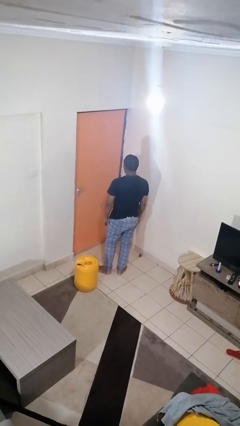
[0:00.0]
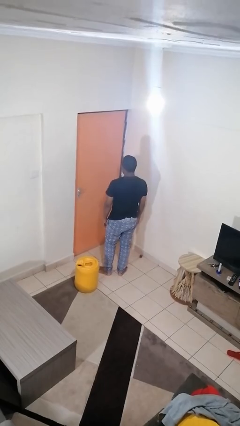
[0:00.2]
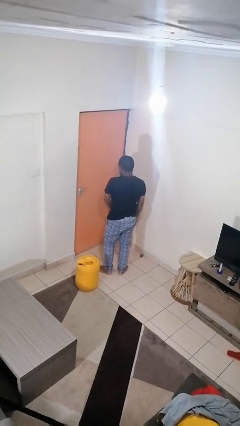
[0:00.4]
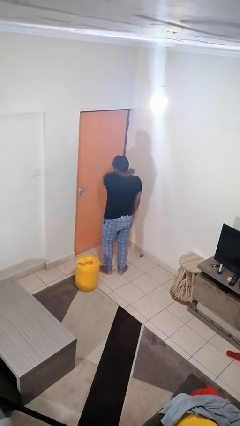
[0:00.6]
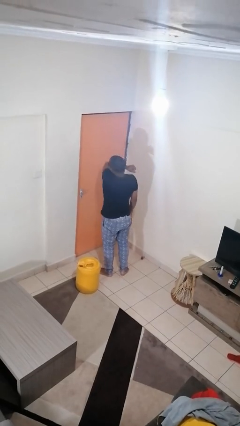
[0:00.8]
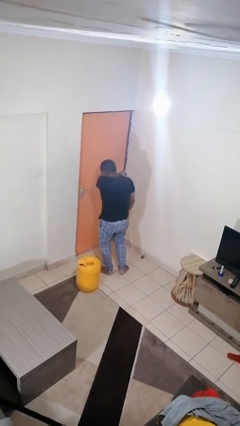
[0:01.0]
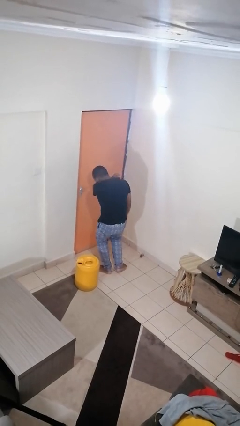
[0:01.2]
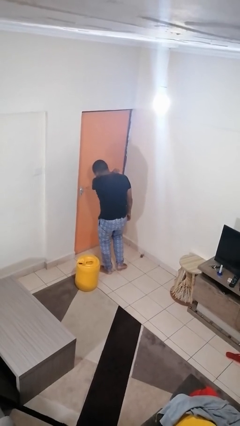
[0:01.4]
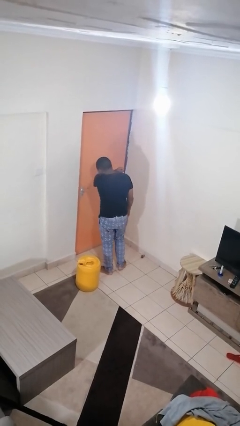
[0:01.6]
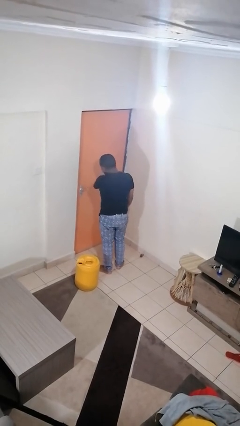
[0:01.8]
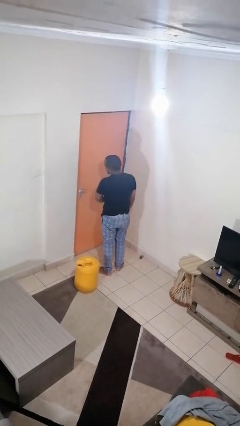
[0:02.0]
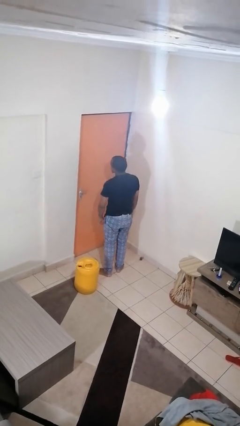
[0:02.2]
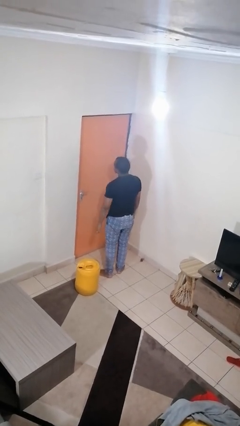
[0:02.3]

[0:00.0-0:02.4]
person sneezes into arm

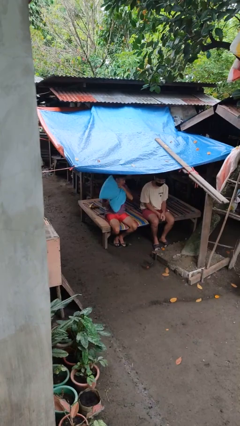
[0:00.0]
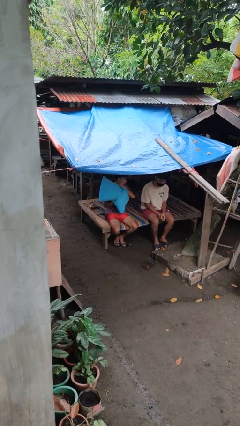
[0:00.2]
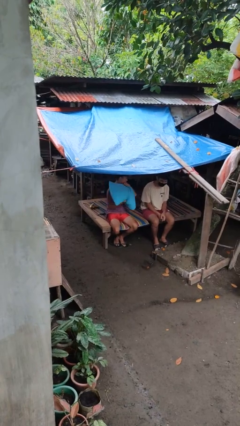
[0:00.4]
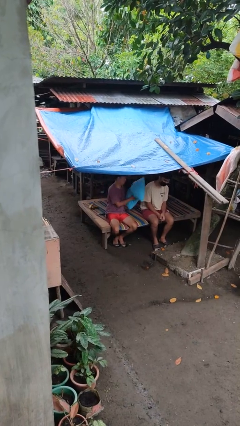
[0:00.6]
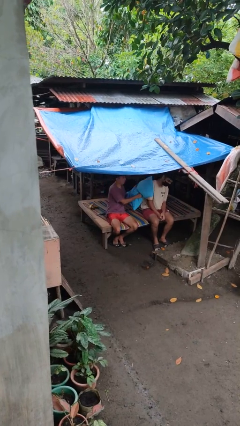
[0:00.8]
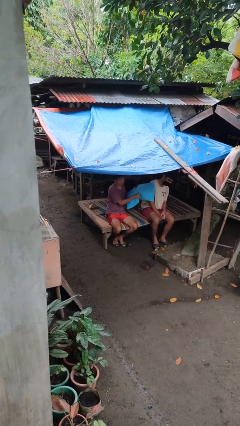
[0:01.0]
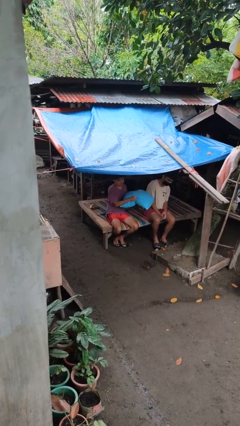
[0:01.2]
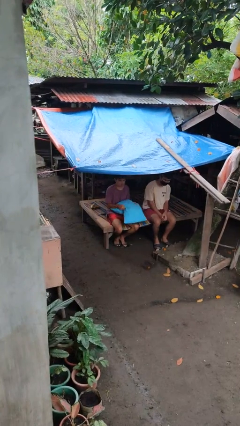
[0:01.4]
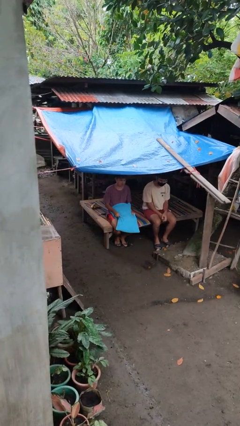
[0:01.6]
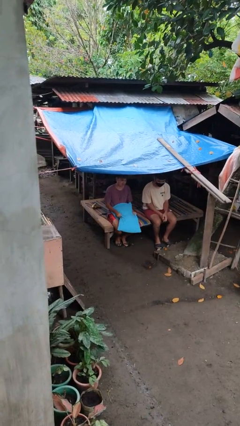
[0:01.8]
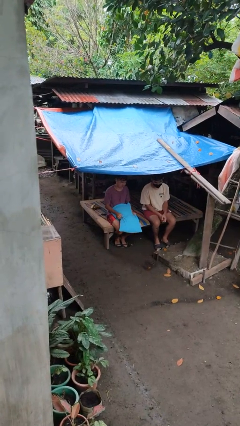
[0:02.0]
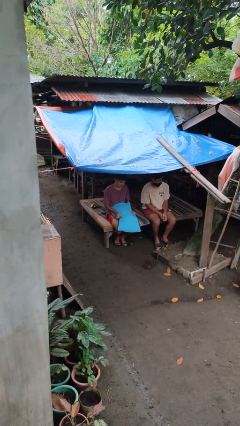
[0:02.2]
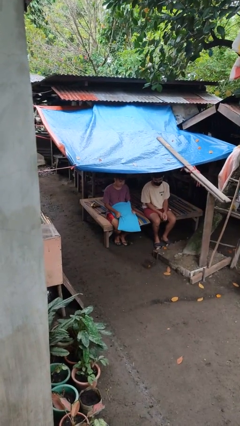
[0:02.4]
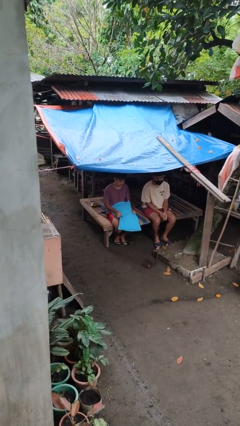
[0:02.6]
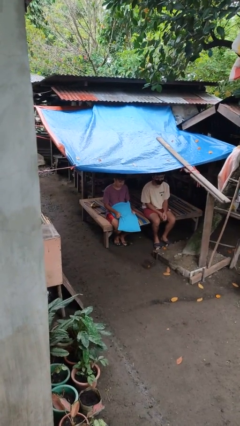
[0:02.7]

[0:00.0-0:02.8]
person hits person with pillow

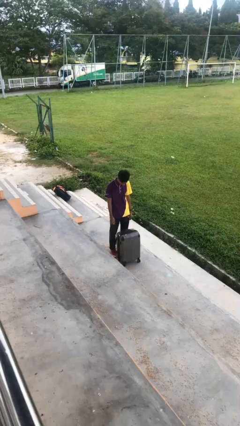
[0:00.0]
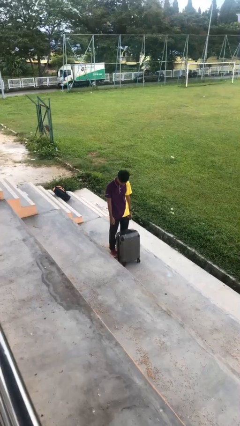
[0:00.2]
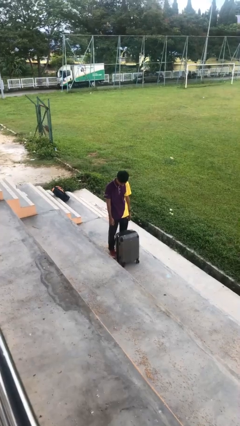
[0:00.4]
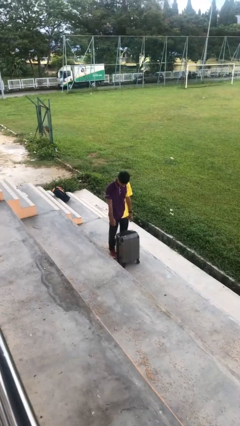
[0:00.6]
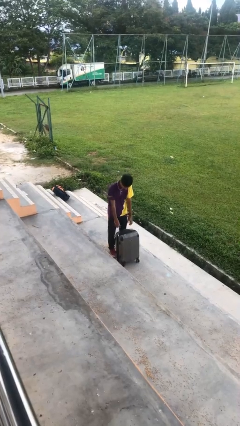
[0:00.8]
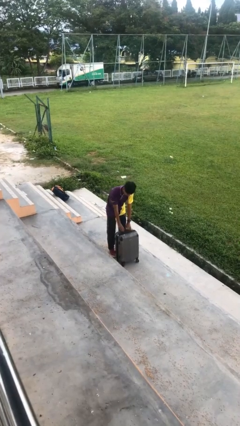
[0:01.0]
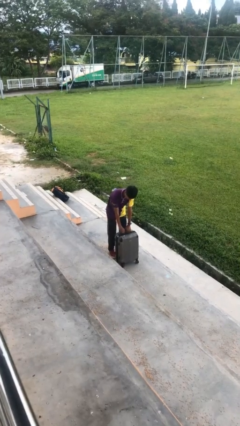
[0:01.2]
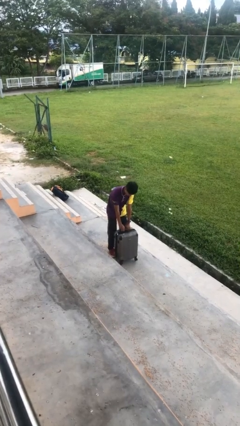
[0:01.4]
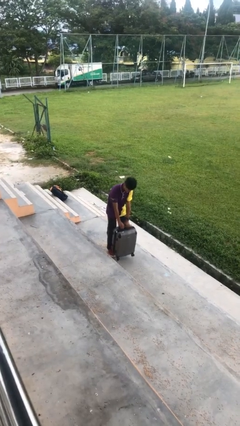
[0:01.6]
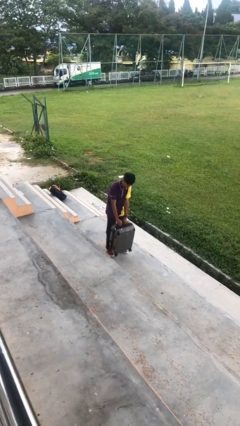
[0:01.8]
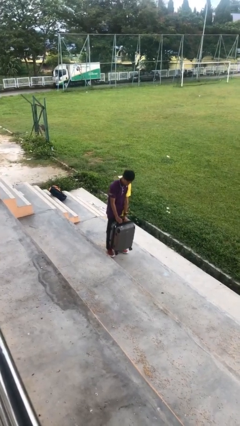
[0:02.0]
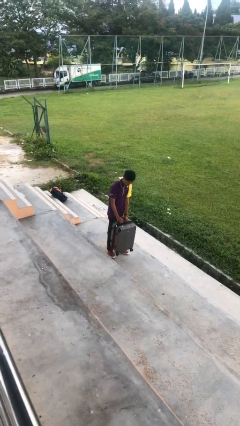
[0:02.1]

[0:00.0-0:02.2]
person picks up object from floor

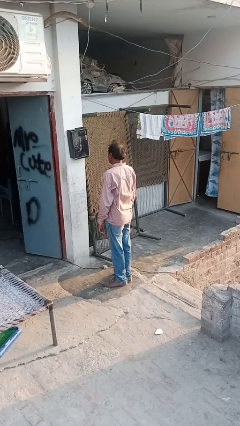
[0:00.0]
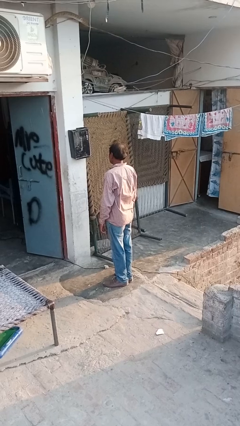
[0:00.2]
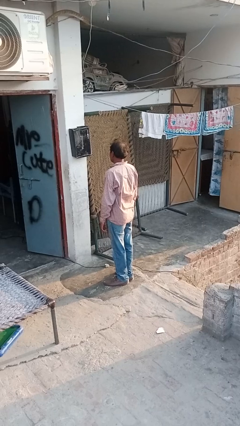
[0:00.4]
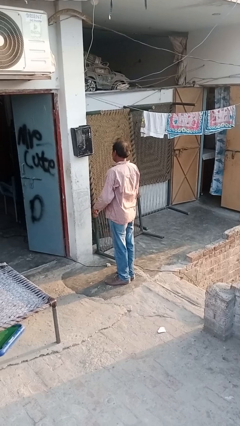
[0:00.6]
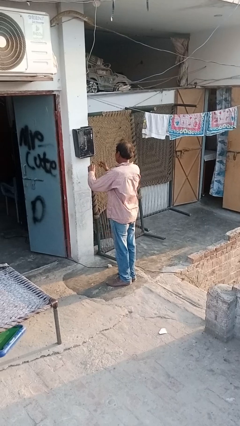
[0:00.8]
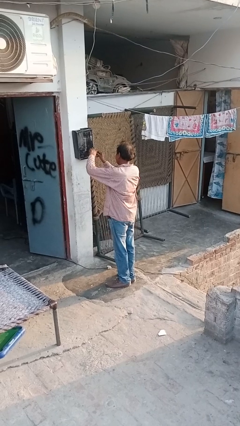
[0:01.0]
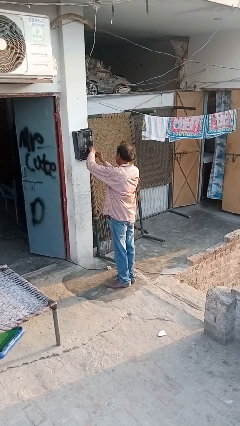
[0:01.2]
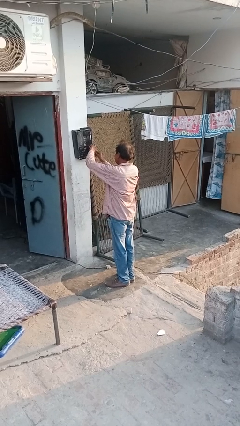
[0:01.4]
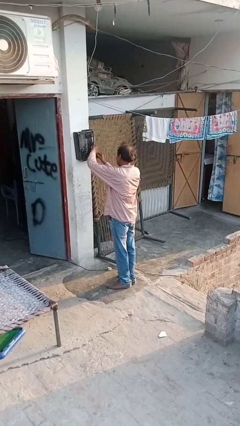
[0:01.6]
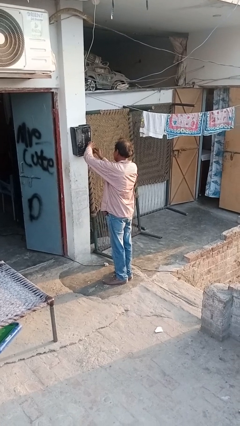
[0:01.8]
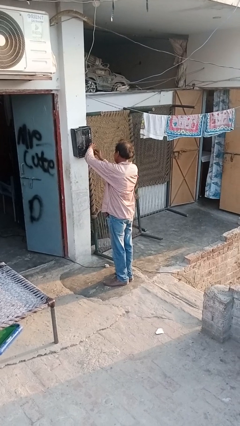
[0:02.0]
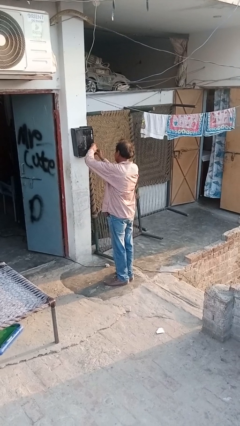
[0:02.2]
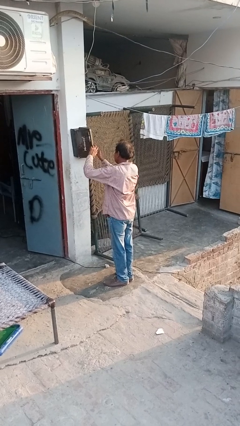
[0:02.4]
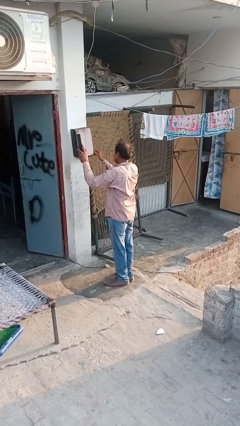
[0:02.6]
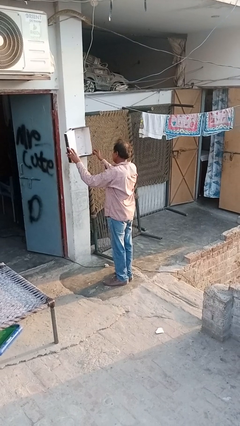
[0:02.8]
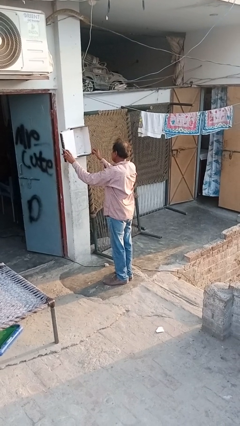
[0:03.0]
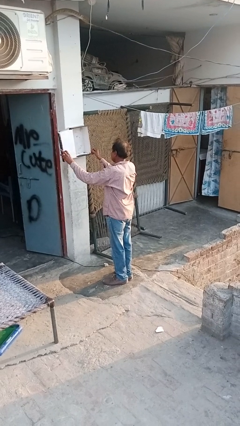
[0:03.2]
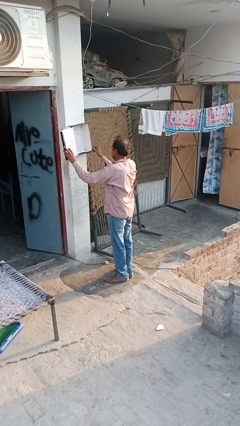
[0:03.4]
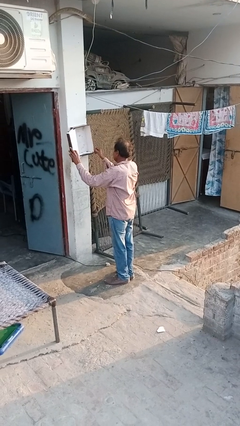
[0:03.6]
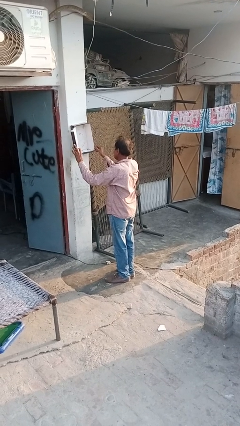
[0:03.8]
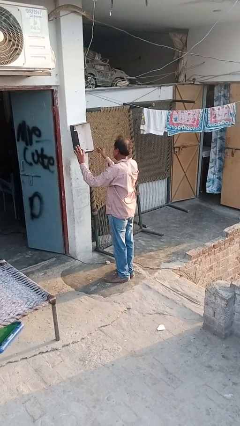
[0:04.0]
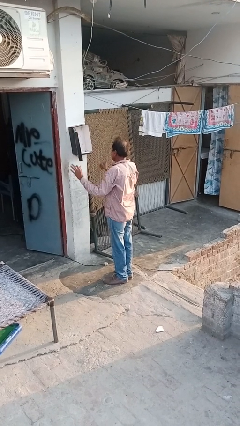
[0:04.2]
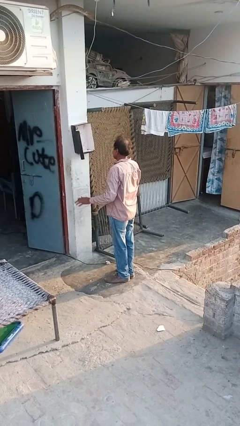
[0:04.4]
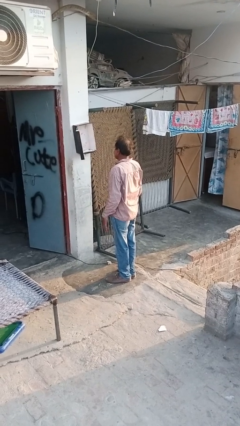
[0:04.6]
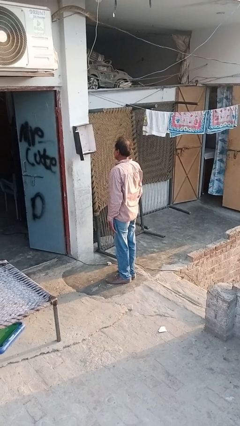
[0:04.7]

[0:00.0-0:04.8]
person opens mailbox

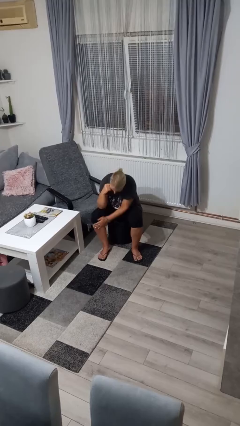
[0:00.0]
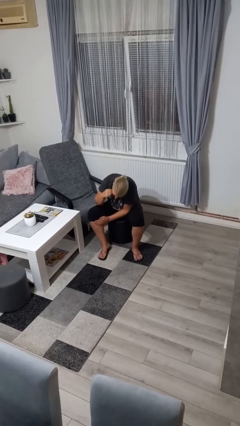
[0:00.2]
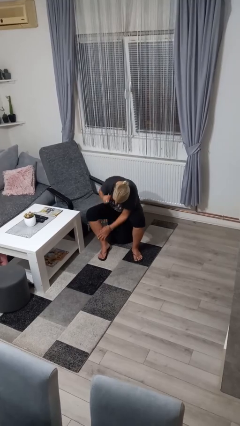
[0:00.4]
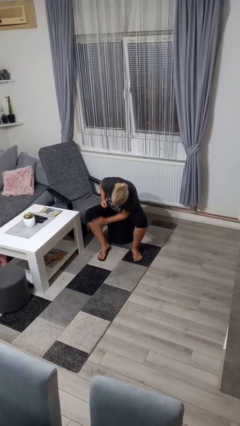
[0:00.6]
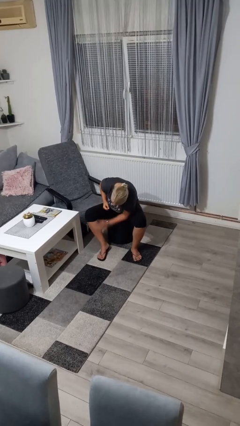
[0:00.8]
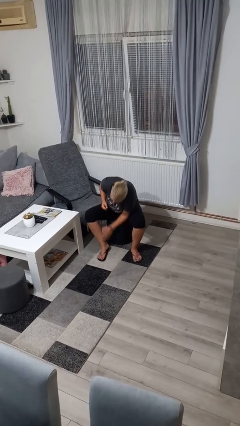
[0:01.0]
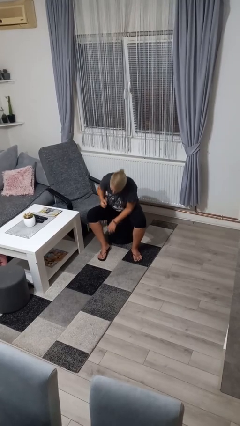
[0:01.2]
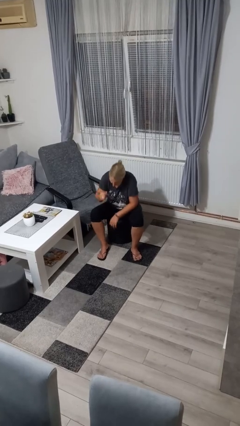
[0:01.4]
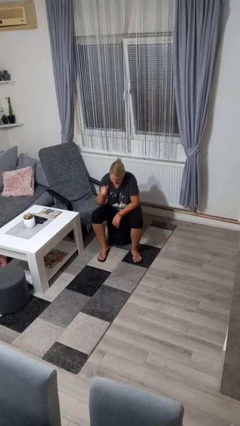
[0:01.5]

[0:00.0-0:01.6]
person swats bug

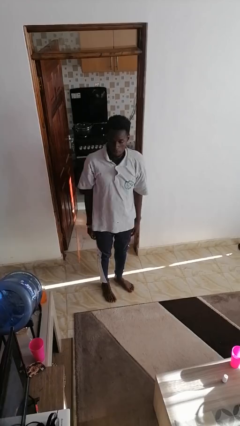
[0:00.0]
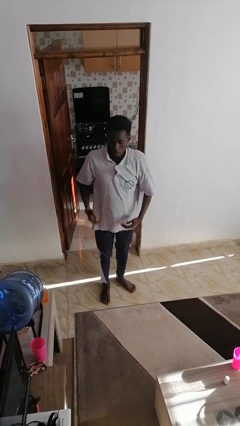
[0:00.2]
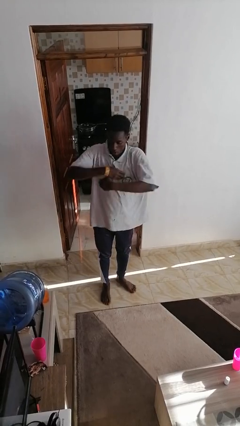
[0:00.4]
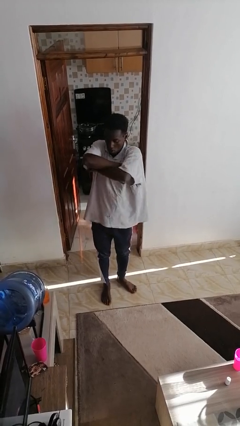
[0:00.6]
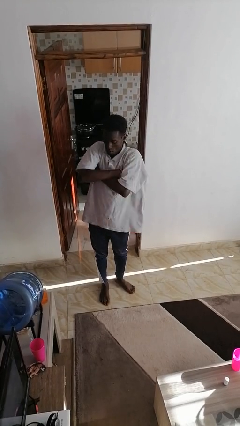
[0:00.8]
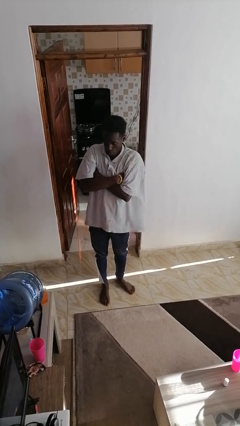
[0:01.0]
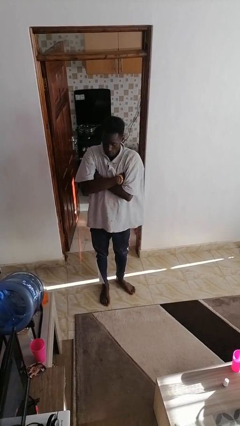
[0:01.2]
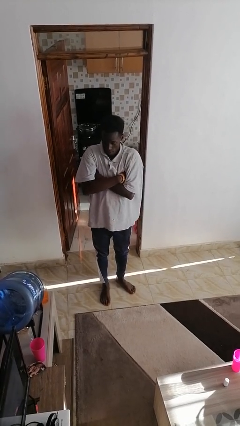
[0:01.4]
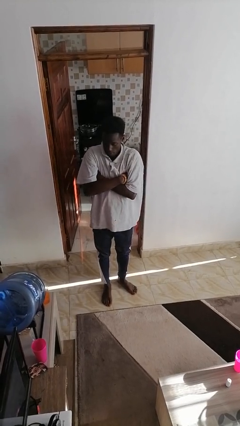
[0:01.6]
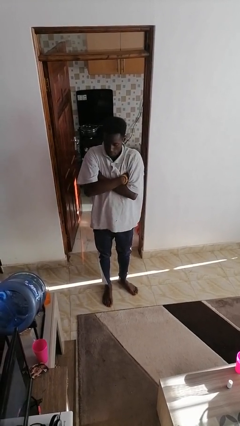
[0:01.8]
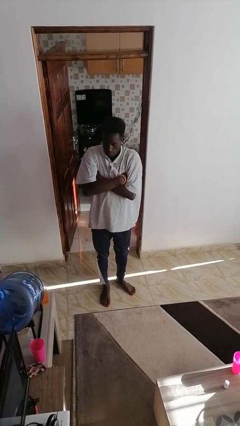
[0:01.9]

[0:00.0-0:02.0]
person crosses arms

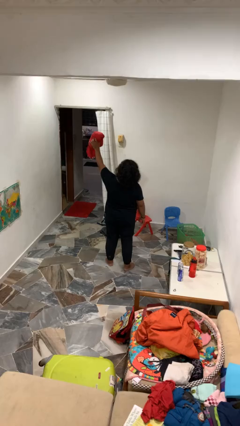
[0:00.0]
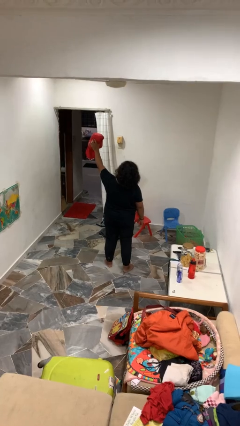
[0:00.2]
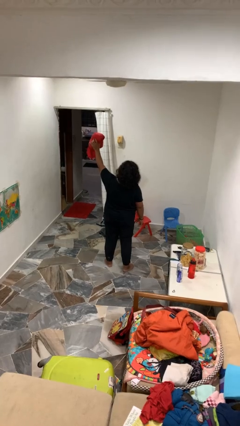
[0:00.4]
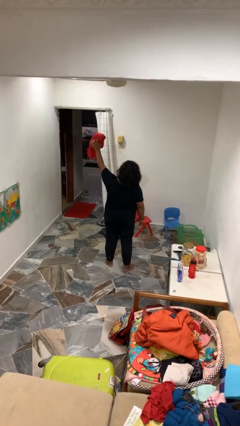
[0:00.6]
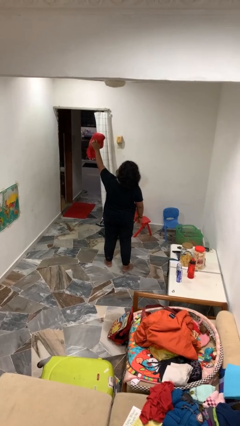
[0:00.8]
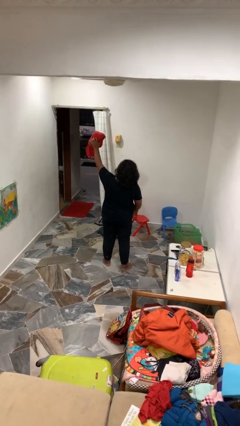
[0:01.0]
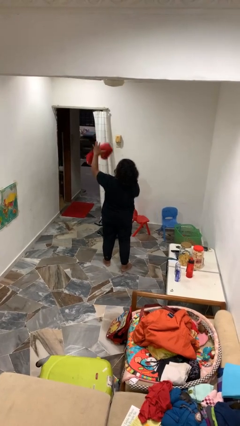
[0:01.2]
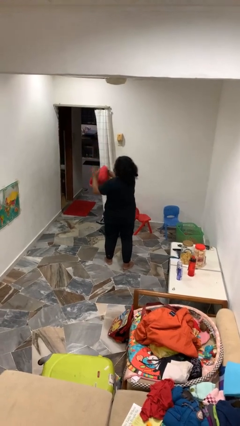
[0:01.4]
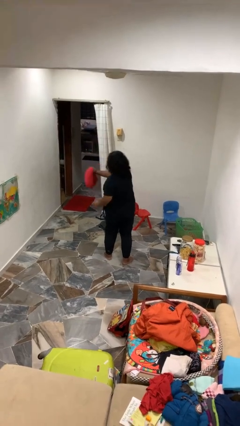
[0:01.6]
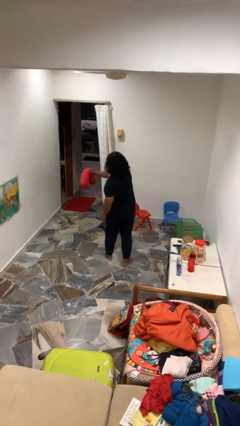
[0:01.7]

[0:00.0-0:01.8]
person drops object
